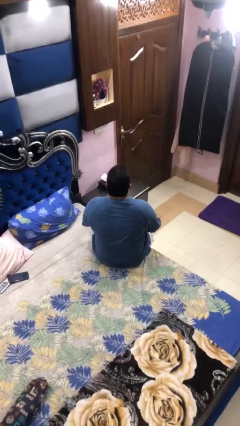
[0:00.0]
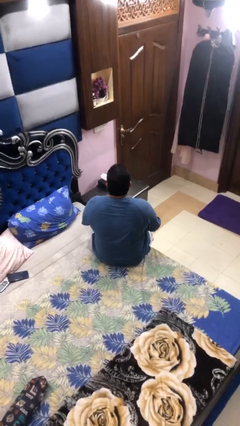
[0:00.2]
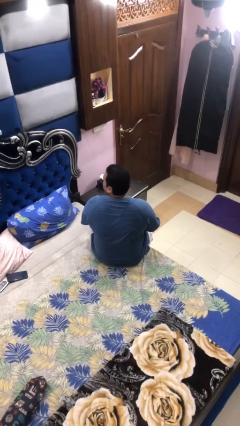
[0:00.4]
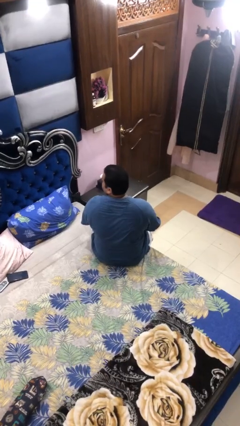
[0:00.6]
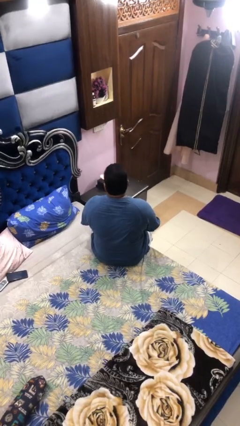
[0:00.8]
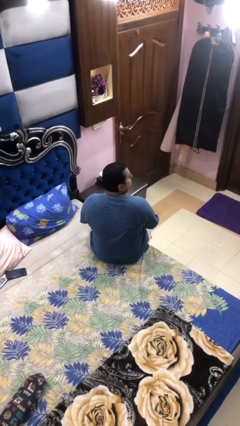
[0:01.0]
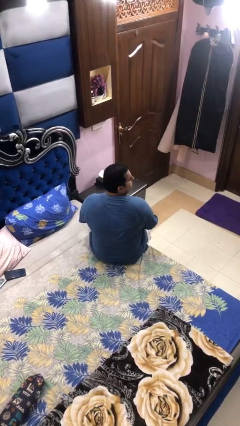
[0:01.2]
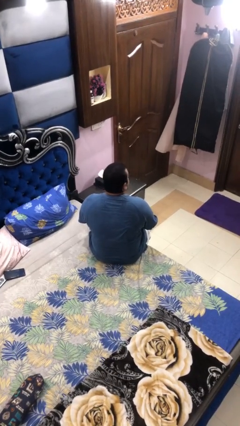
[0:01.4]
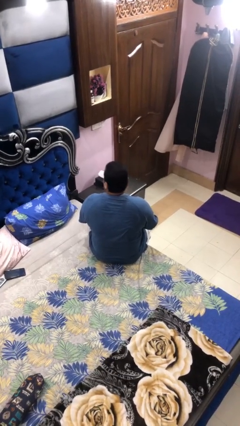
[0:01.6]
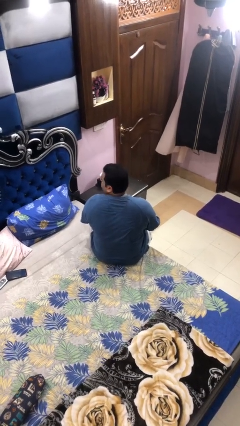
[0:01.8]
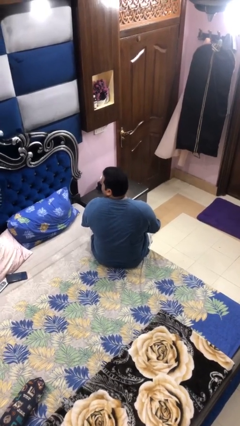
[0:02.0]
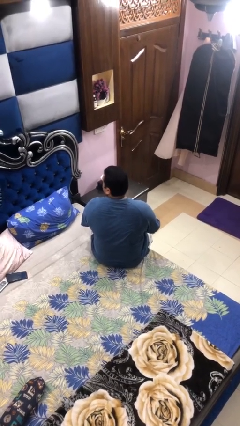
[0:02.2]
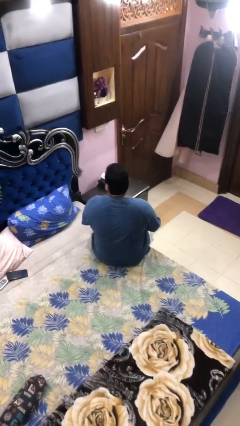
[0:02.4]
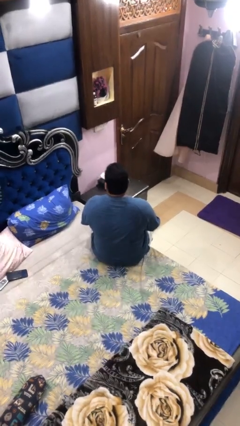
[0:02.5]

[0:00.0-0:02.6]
person shakes head

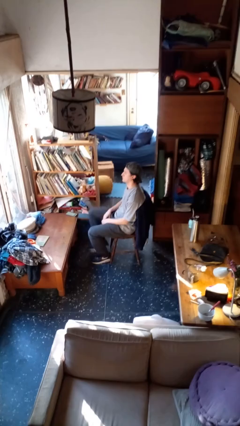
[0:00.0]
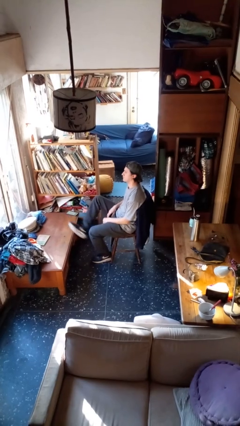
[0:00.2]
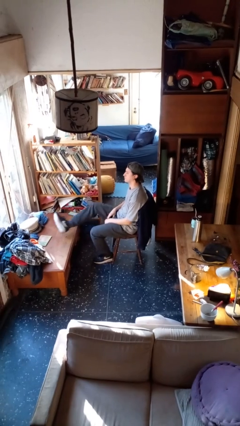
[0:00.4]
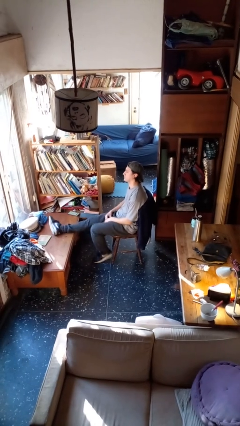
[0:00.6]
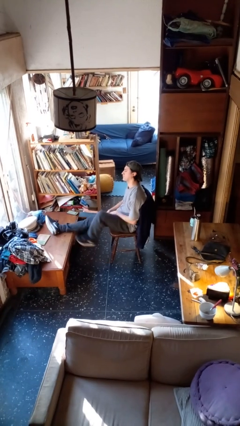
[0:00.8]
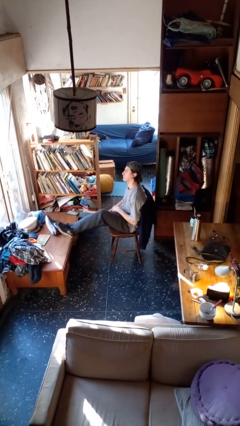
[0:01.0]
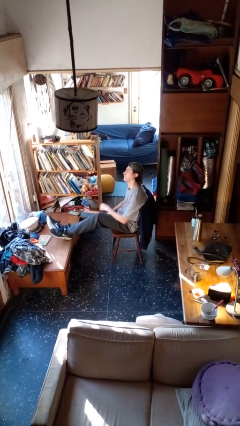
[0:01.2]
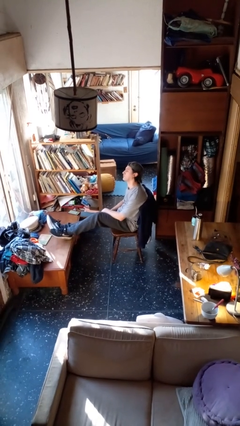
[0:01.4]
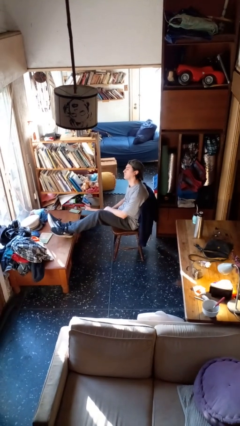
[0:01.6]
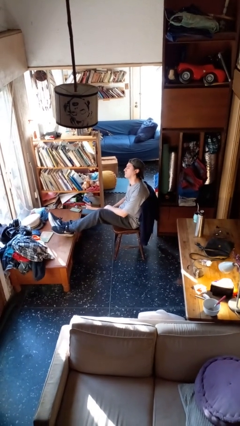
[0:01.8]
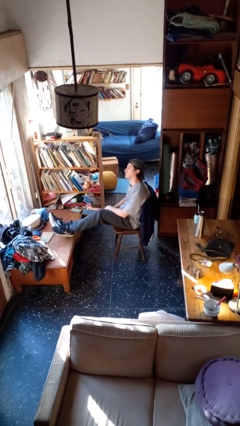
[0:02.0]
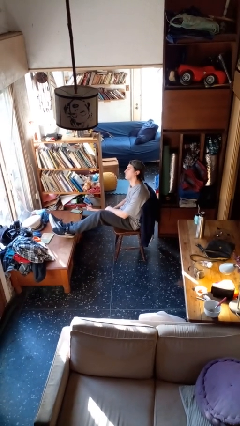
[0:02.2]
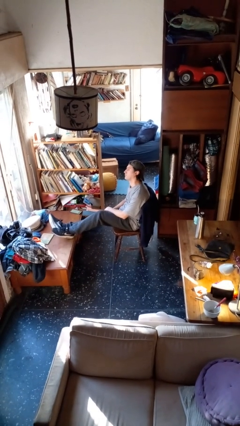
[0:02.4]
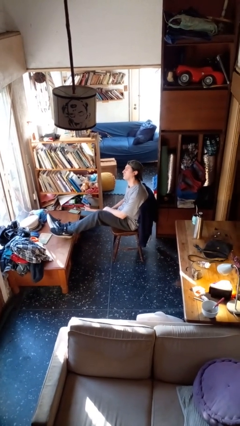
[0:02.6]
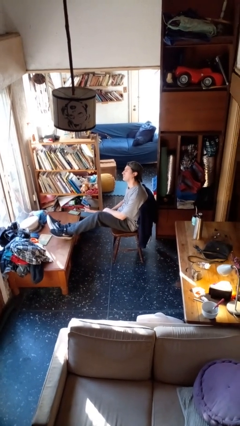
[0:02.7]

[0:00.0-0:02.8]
person puts feet up

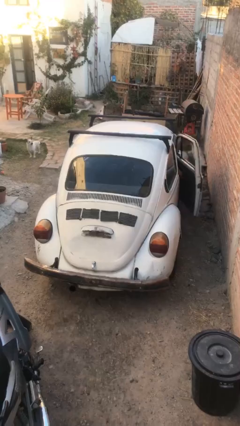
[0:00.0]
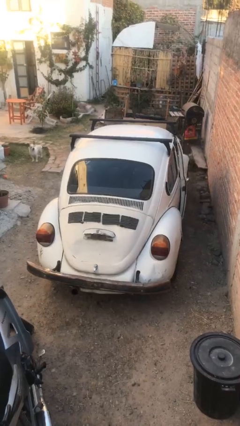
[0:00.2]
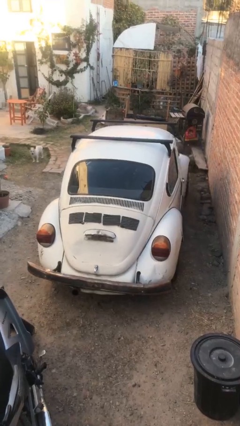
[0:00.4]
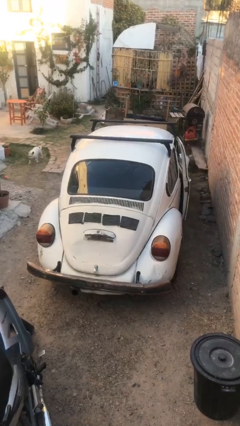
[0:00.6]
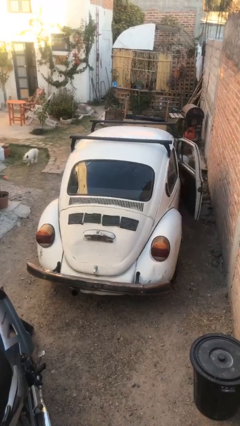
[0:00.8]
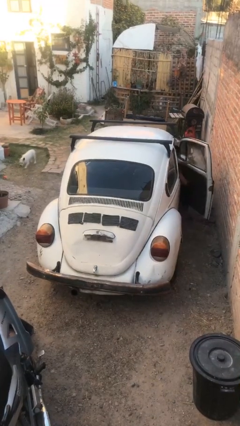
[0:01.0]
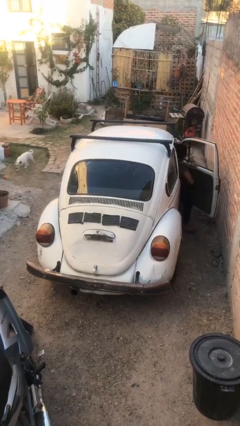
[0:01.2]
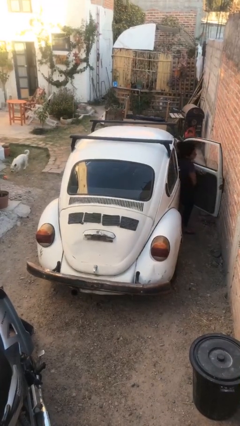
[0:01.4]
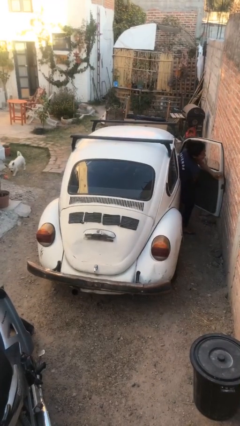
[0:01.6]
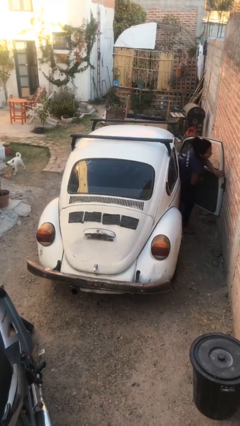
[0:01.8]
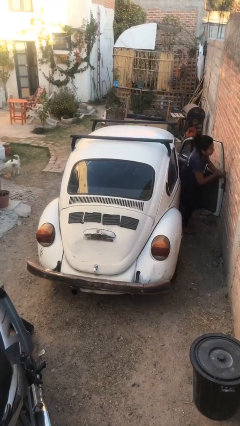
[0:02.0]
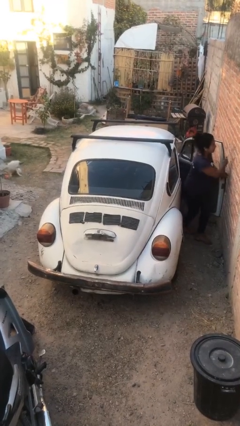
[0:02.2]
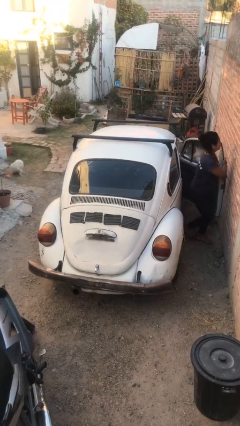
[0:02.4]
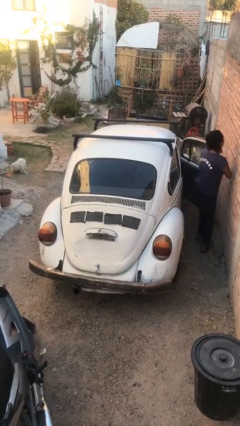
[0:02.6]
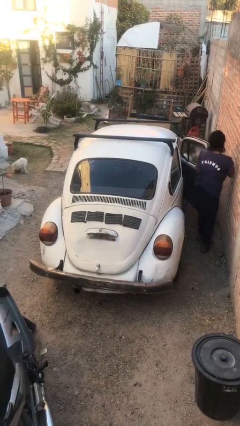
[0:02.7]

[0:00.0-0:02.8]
car drops off person

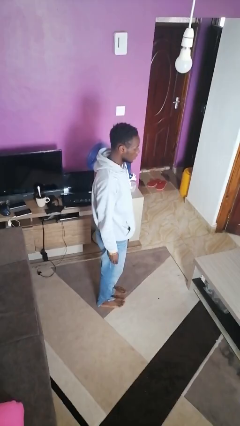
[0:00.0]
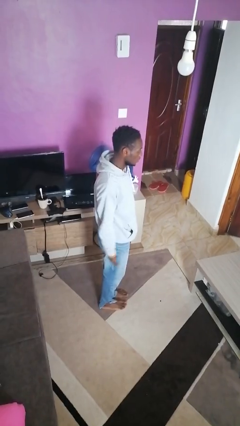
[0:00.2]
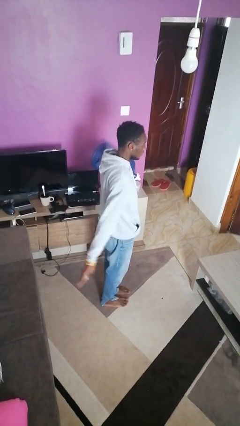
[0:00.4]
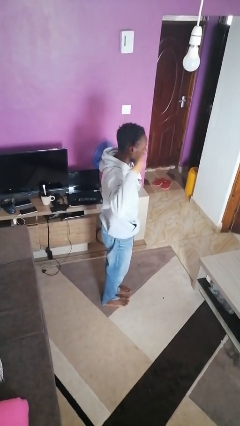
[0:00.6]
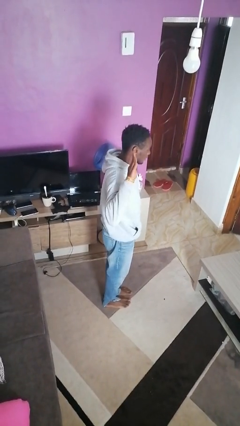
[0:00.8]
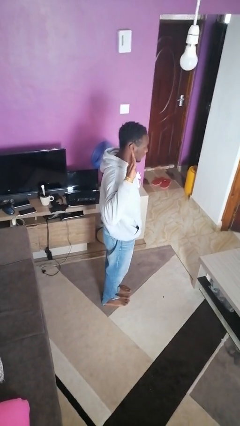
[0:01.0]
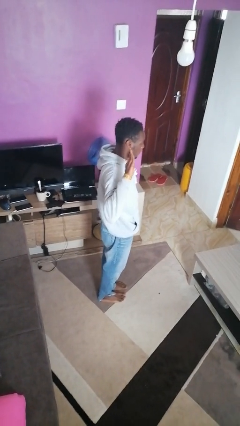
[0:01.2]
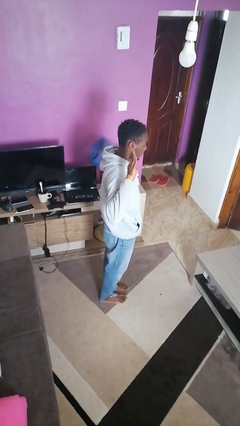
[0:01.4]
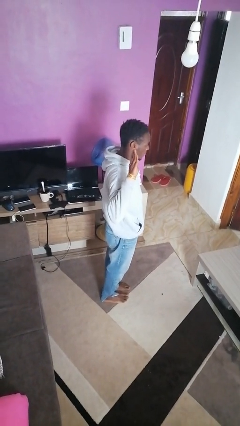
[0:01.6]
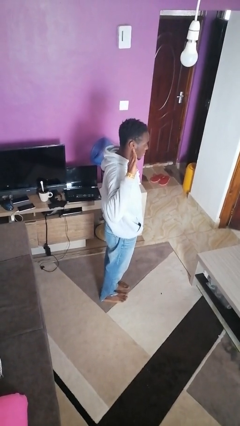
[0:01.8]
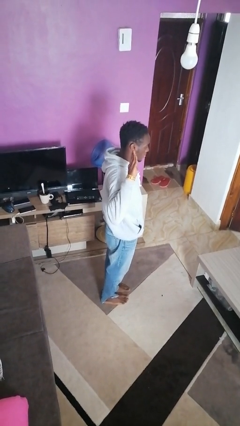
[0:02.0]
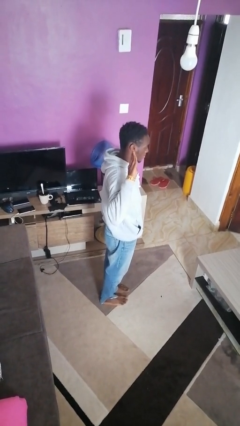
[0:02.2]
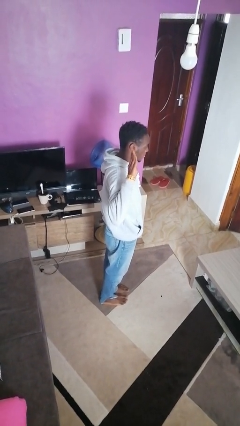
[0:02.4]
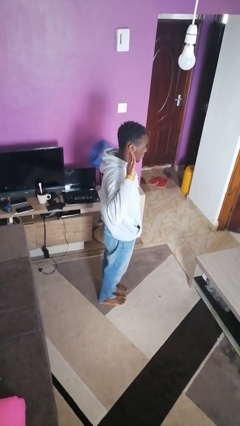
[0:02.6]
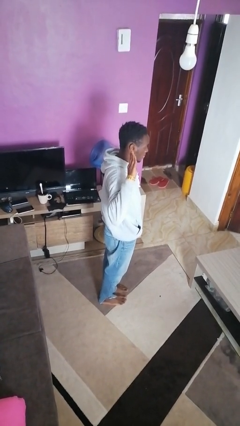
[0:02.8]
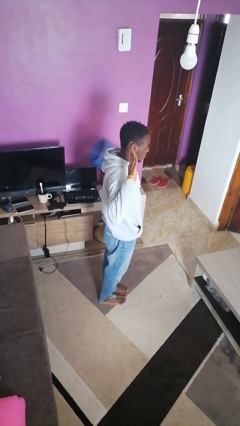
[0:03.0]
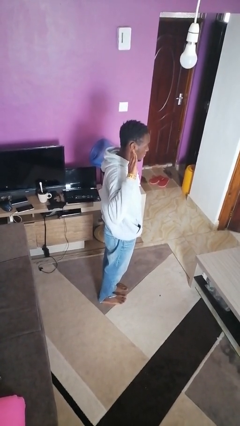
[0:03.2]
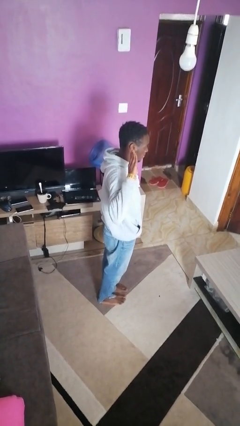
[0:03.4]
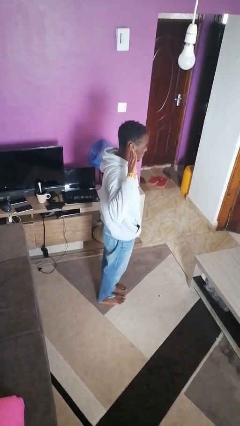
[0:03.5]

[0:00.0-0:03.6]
person salutes

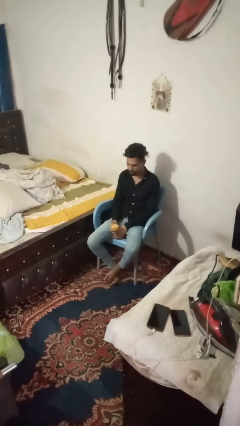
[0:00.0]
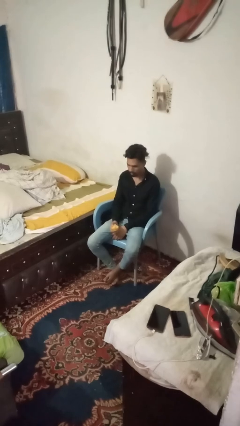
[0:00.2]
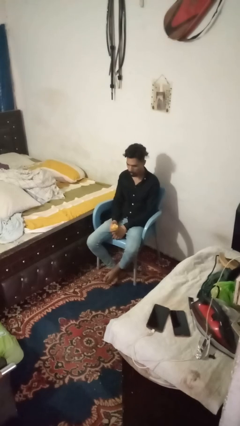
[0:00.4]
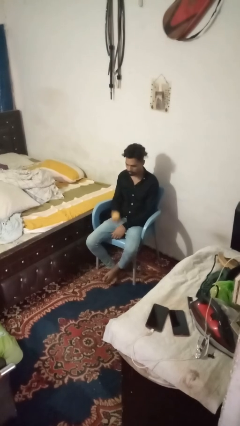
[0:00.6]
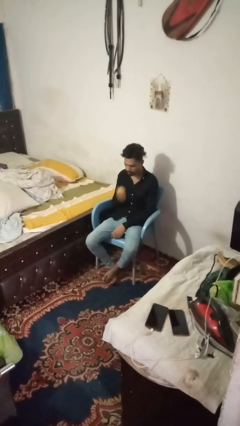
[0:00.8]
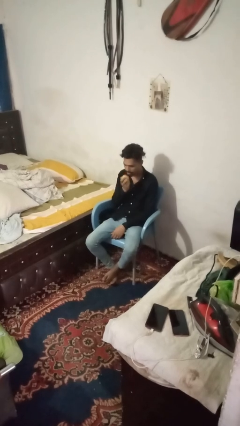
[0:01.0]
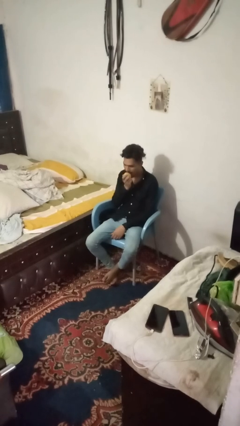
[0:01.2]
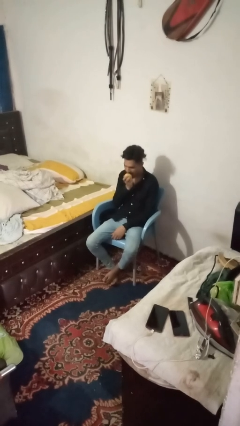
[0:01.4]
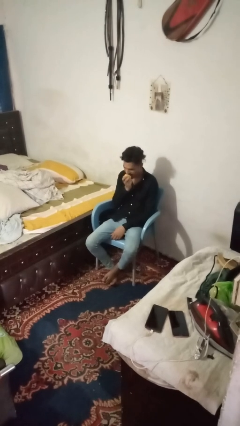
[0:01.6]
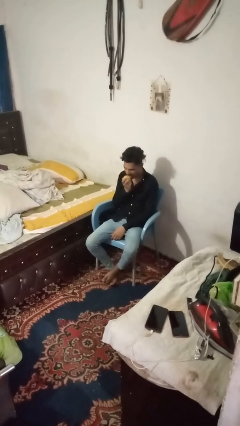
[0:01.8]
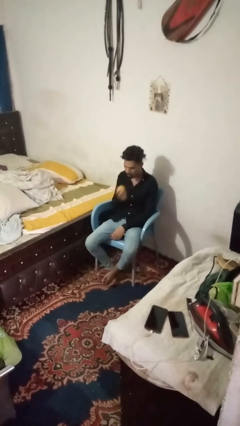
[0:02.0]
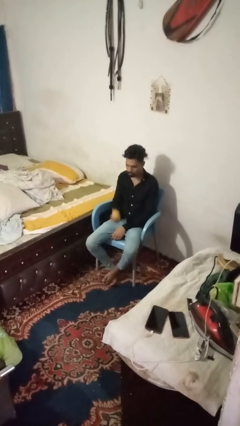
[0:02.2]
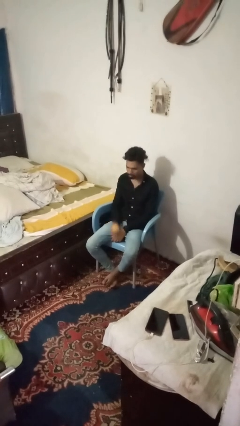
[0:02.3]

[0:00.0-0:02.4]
person eats apple

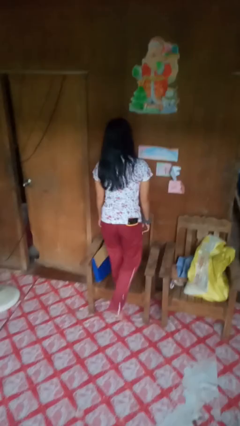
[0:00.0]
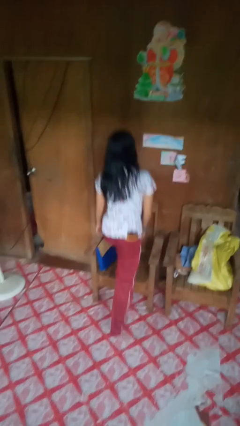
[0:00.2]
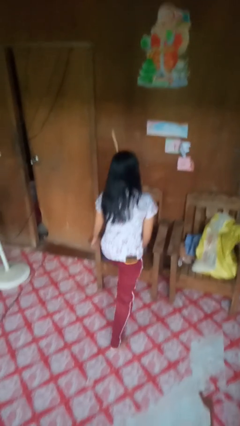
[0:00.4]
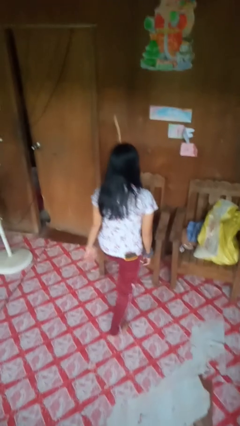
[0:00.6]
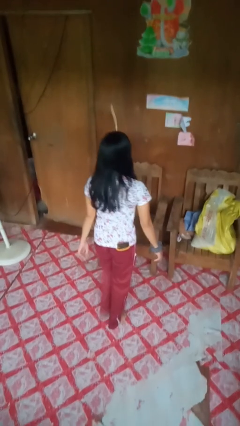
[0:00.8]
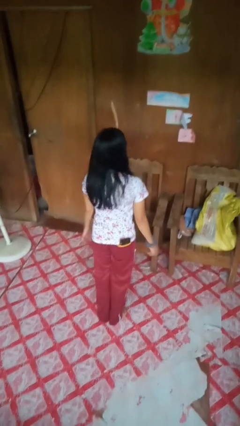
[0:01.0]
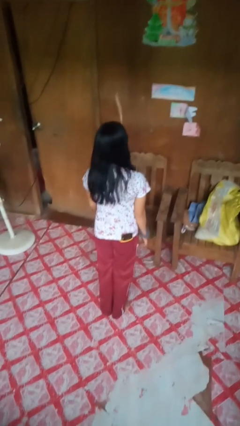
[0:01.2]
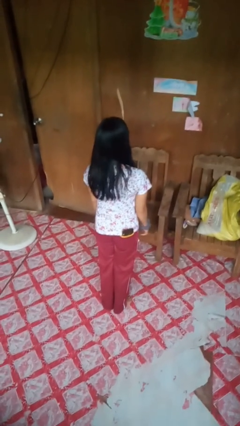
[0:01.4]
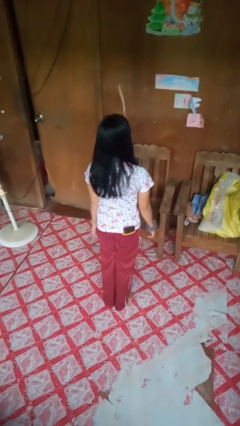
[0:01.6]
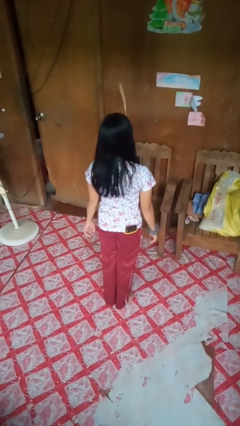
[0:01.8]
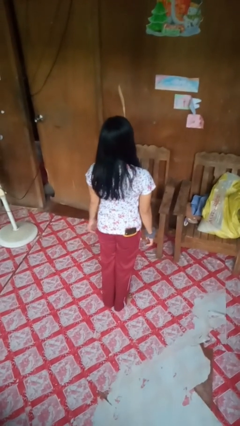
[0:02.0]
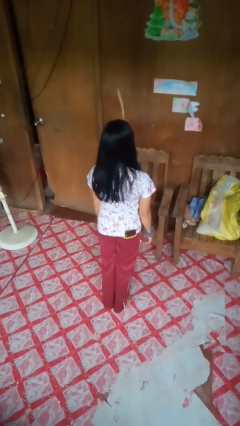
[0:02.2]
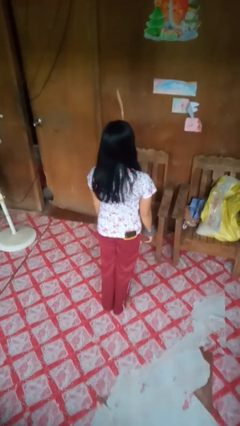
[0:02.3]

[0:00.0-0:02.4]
person climbs off chair

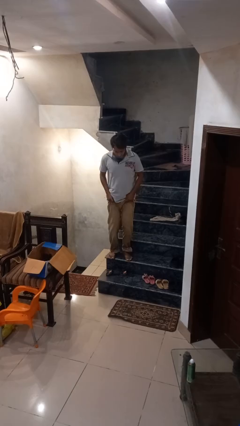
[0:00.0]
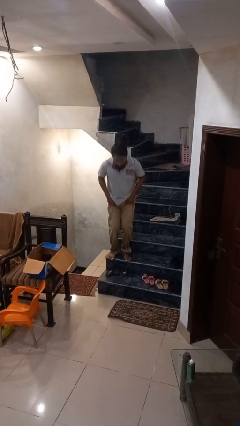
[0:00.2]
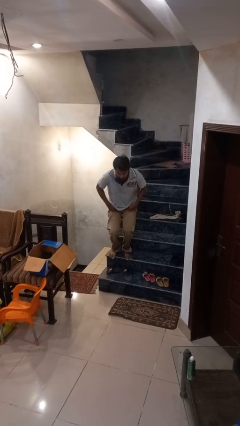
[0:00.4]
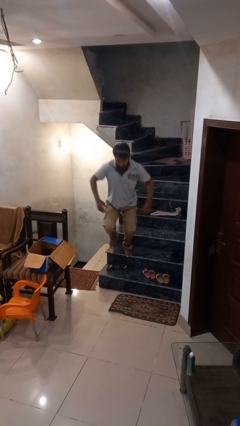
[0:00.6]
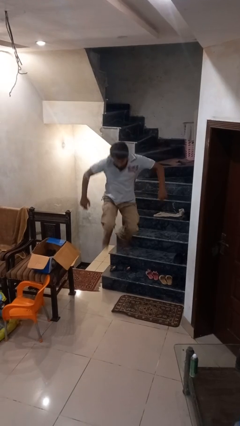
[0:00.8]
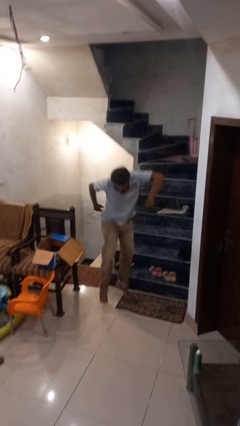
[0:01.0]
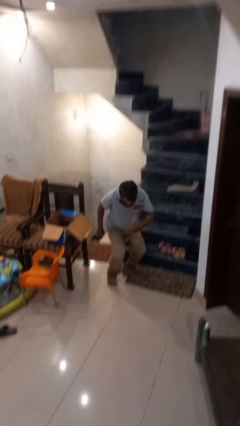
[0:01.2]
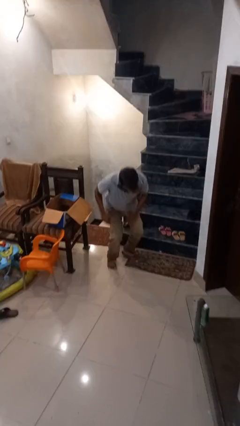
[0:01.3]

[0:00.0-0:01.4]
person climbs down stairs
